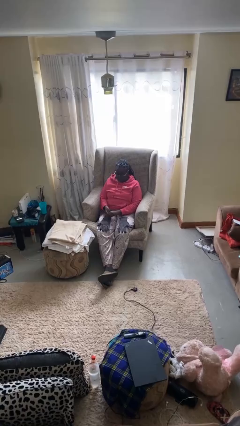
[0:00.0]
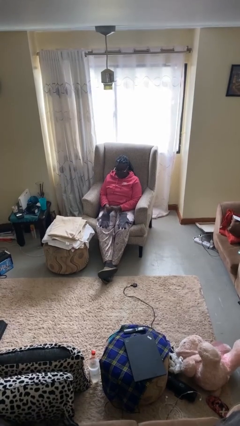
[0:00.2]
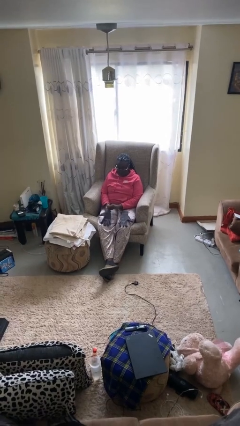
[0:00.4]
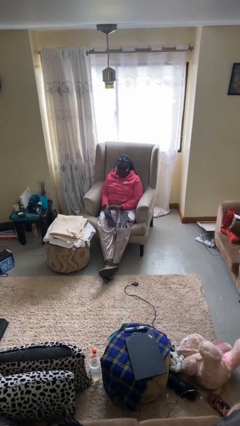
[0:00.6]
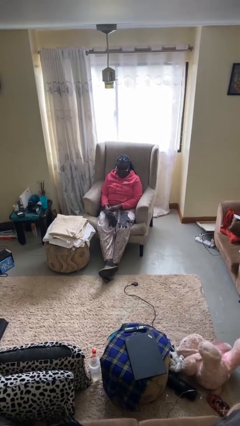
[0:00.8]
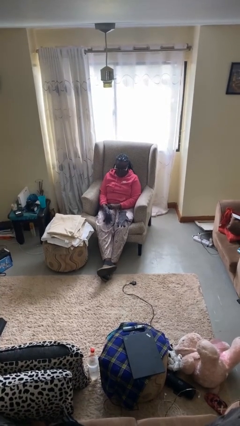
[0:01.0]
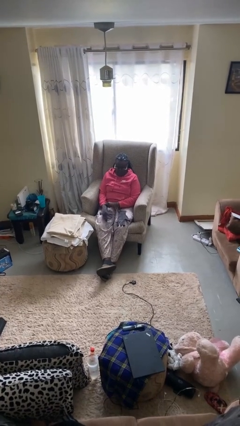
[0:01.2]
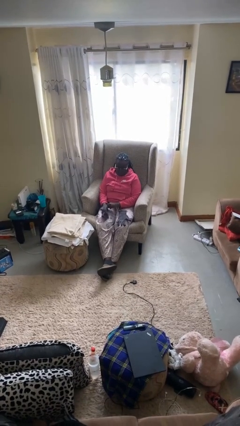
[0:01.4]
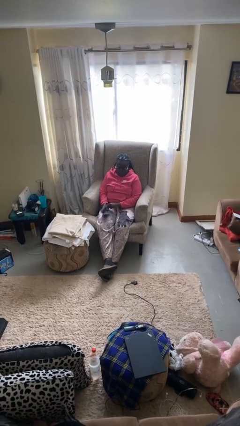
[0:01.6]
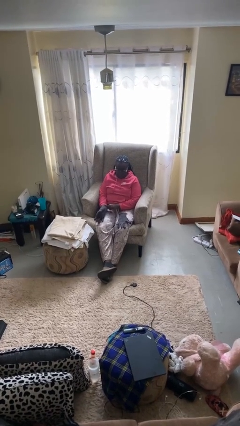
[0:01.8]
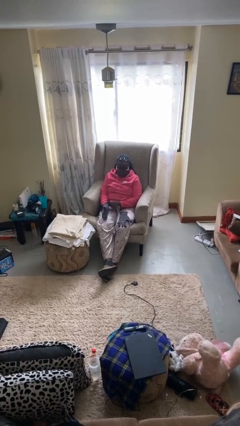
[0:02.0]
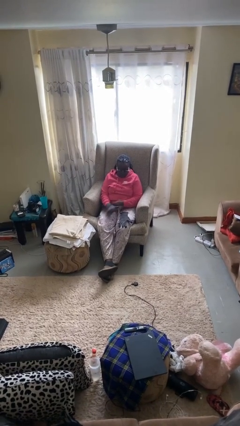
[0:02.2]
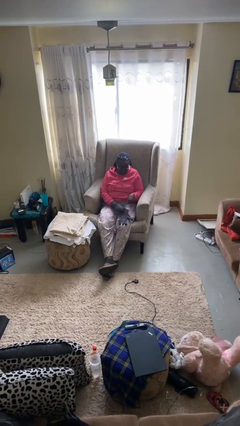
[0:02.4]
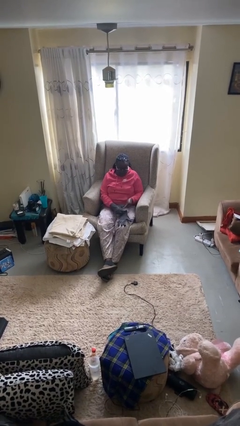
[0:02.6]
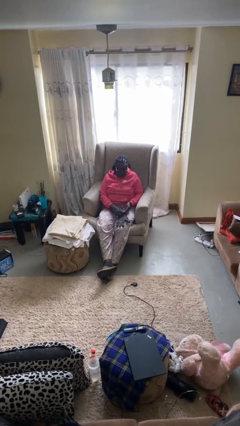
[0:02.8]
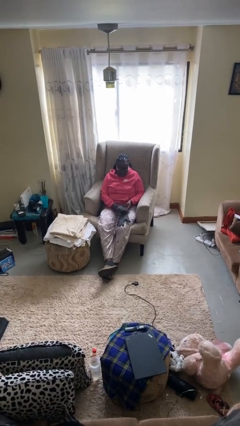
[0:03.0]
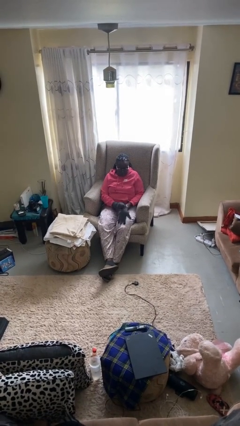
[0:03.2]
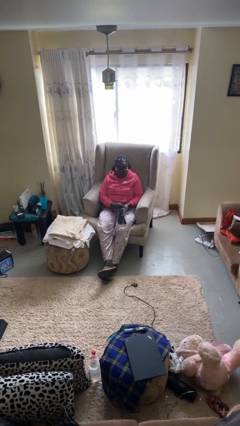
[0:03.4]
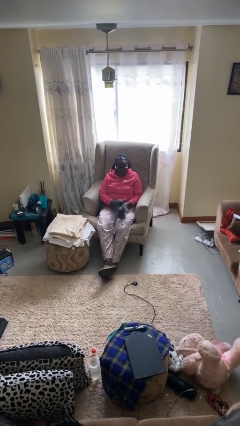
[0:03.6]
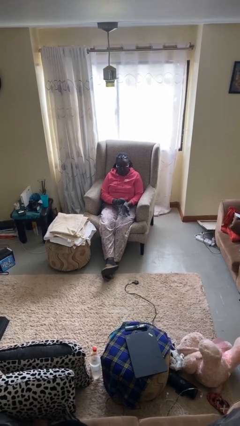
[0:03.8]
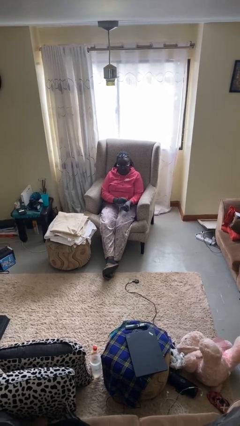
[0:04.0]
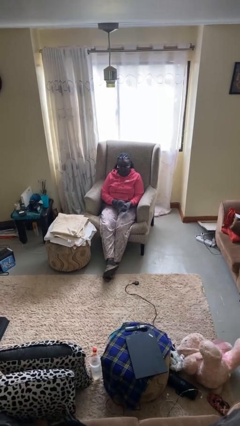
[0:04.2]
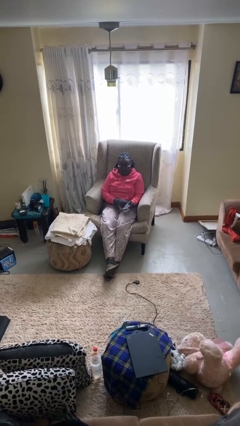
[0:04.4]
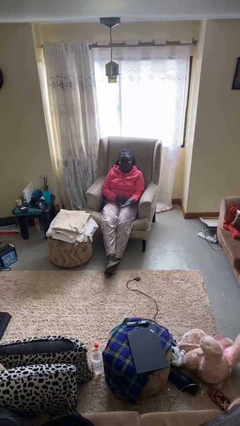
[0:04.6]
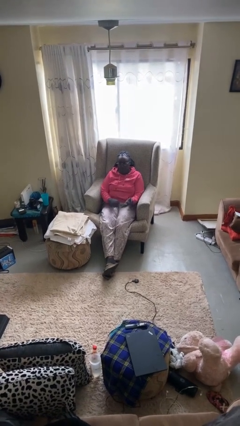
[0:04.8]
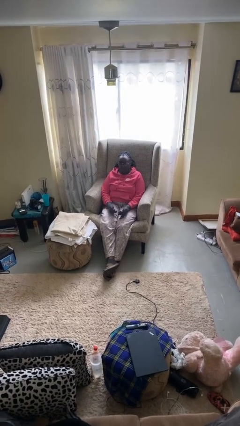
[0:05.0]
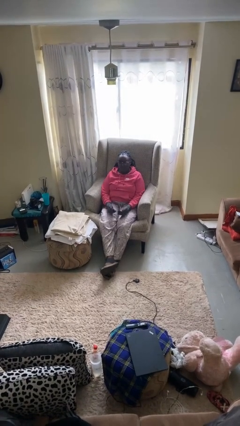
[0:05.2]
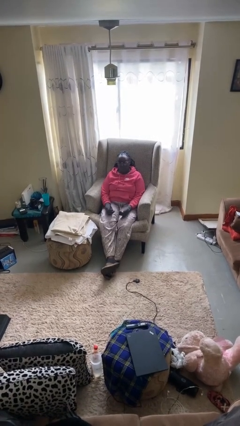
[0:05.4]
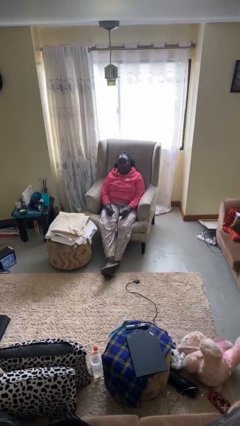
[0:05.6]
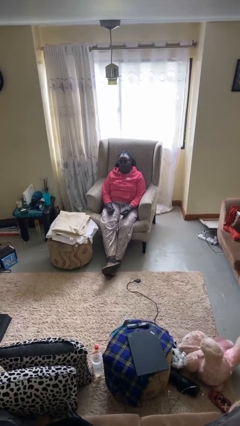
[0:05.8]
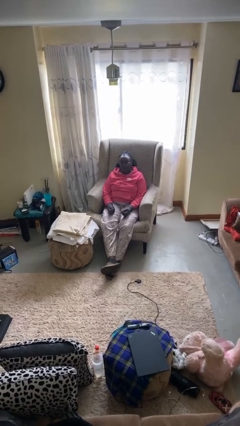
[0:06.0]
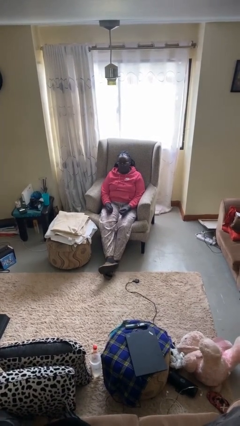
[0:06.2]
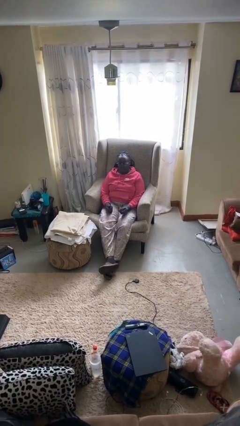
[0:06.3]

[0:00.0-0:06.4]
person puts on gloves

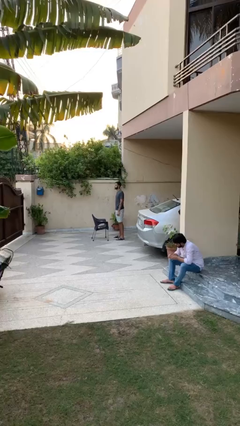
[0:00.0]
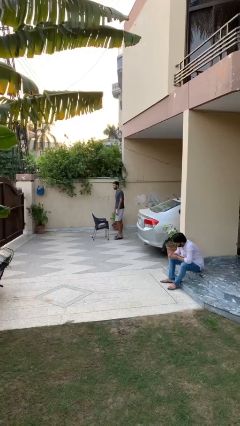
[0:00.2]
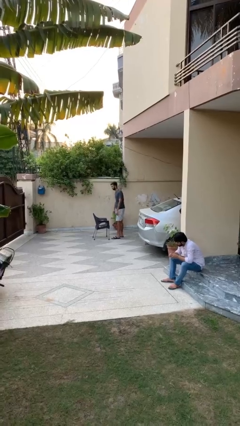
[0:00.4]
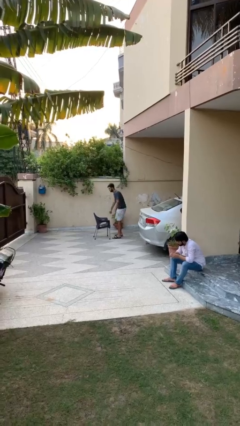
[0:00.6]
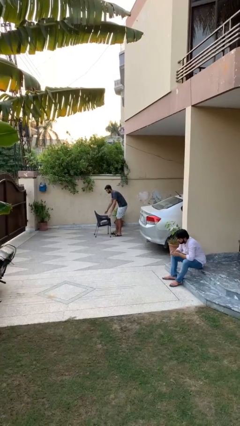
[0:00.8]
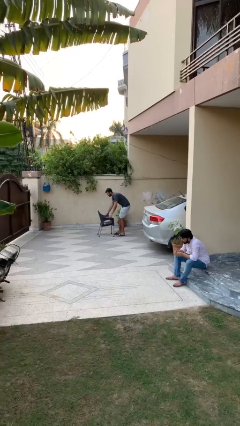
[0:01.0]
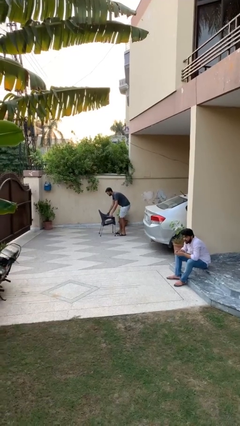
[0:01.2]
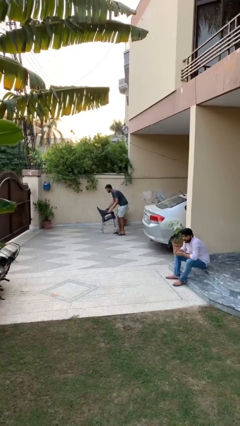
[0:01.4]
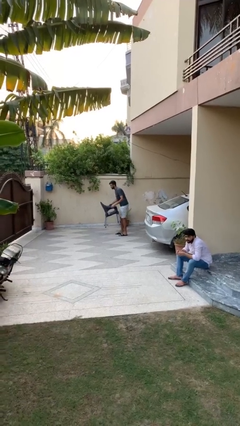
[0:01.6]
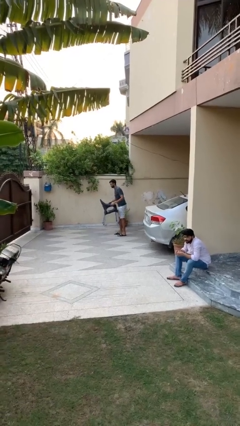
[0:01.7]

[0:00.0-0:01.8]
person picks up object from floor

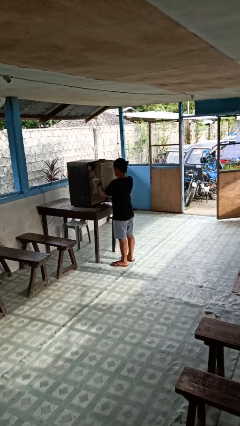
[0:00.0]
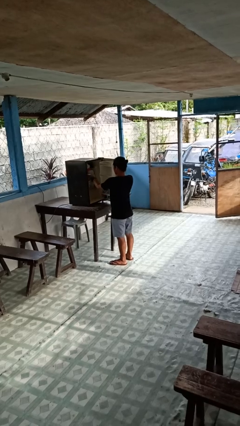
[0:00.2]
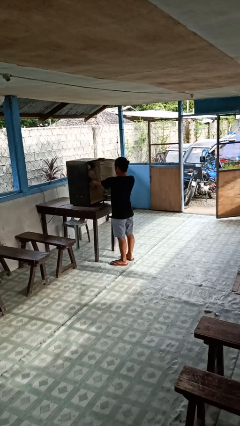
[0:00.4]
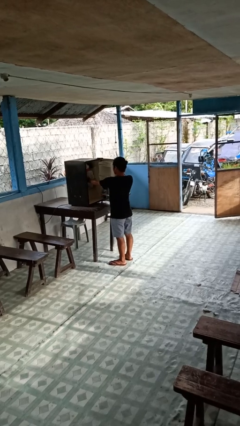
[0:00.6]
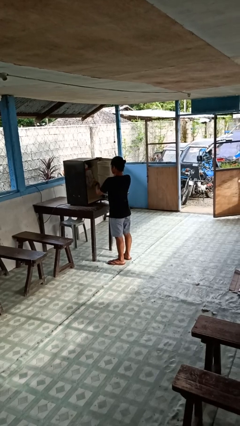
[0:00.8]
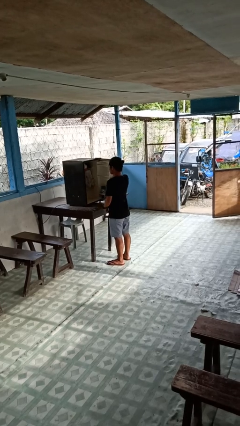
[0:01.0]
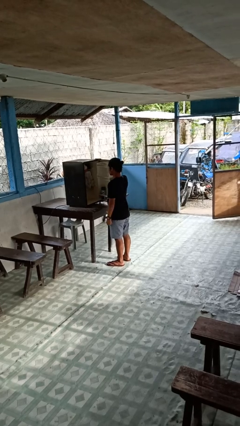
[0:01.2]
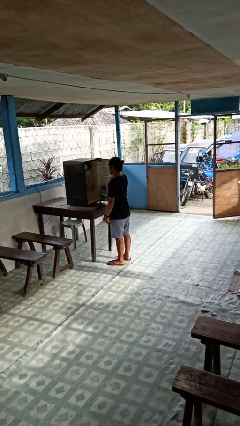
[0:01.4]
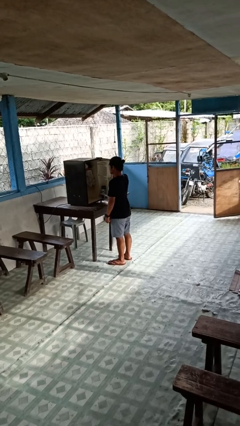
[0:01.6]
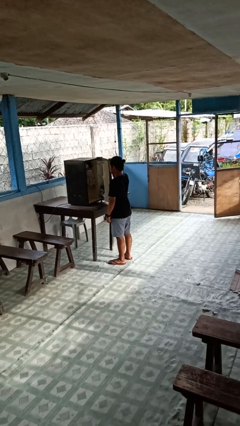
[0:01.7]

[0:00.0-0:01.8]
person puts object into refrigerator

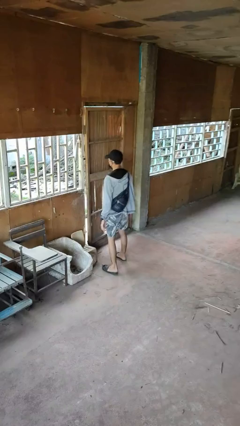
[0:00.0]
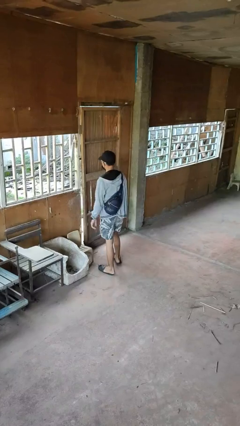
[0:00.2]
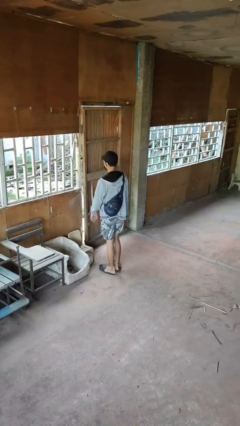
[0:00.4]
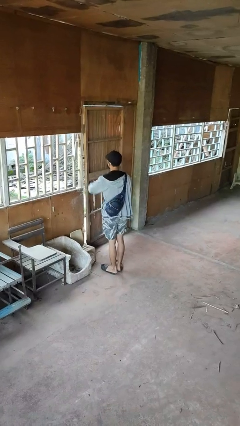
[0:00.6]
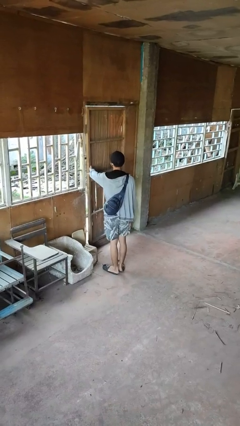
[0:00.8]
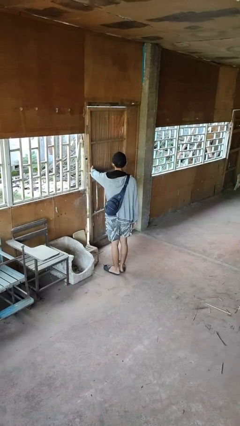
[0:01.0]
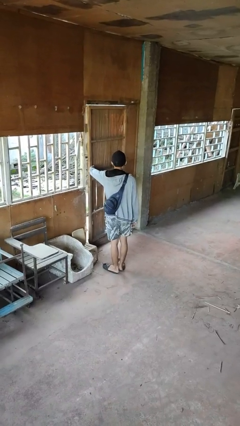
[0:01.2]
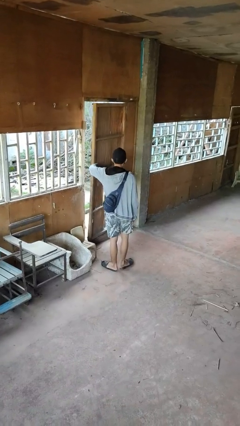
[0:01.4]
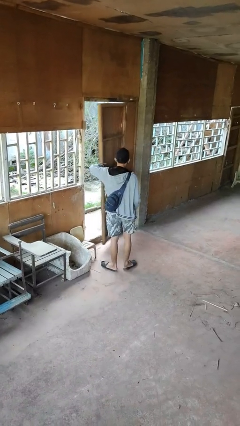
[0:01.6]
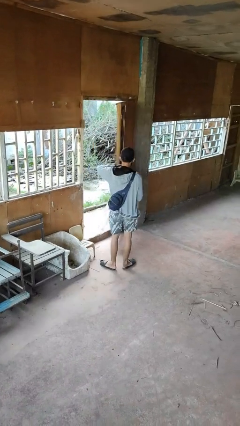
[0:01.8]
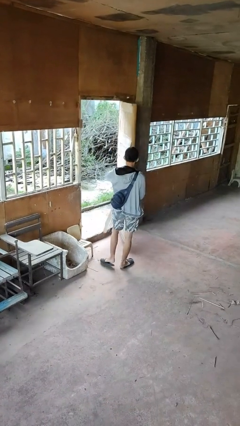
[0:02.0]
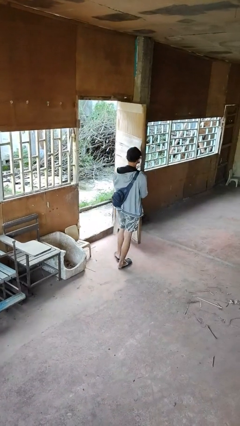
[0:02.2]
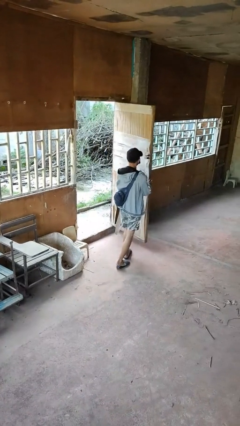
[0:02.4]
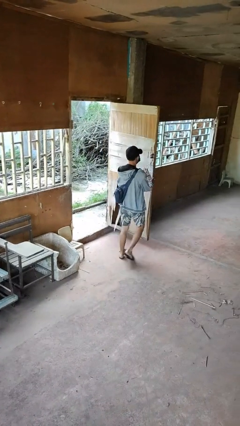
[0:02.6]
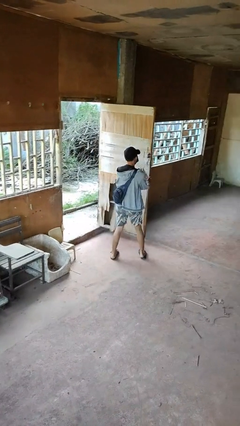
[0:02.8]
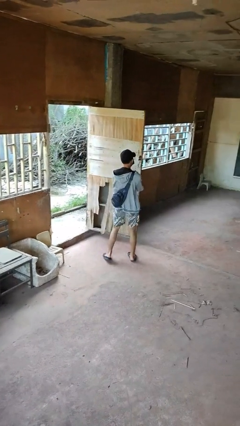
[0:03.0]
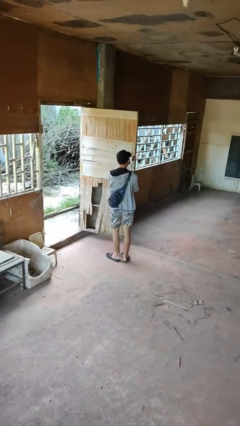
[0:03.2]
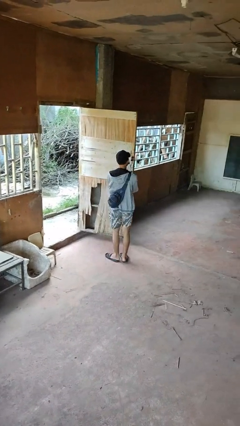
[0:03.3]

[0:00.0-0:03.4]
person opens facility door

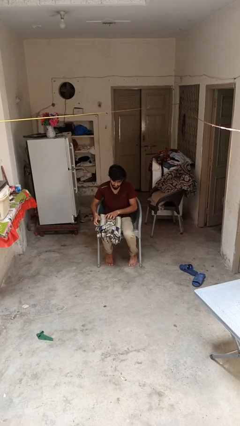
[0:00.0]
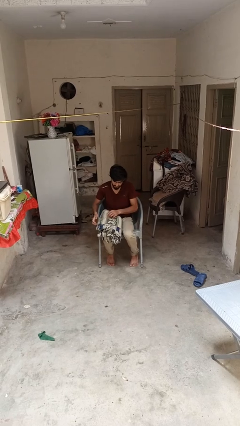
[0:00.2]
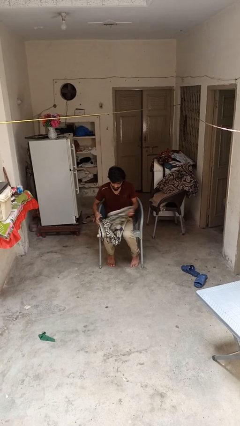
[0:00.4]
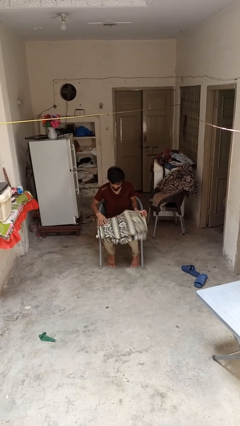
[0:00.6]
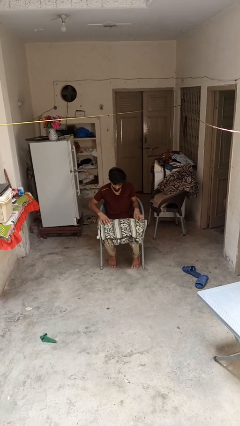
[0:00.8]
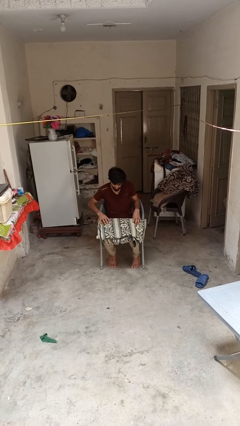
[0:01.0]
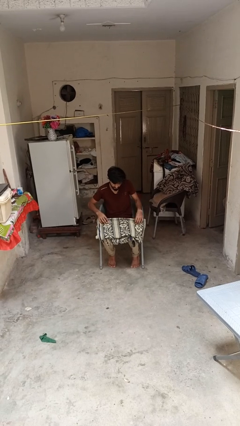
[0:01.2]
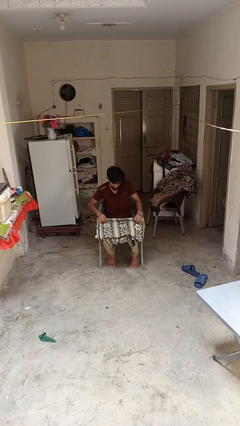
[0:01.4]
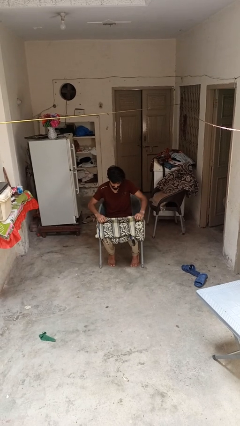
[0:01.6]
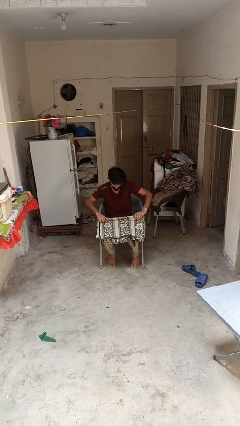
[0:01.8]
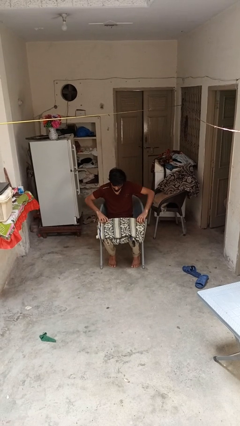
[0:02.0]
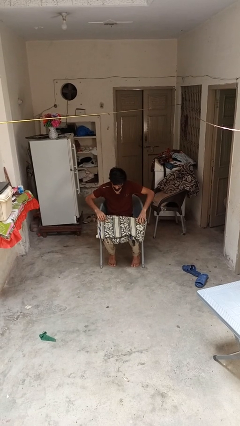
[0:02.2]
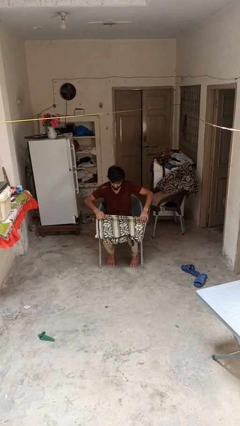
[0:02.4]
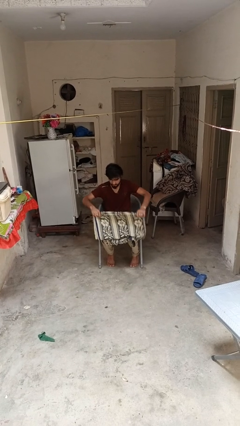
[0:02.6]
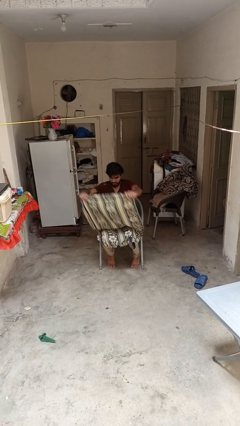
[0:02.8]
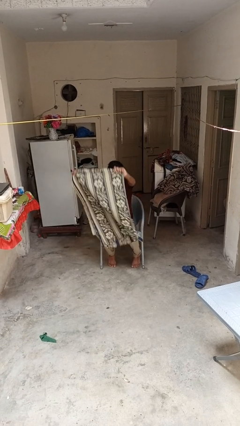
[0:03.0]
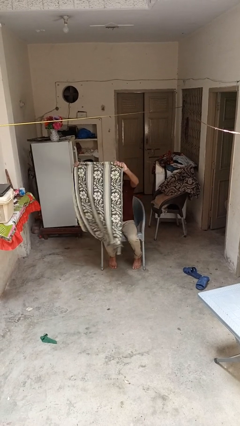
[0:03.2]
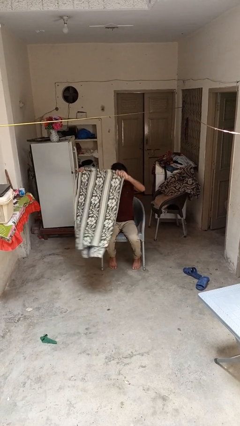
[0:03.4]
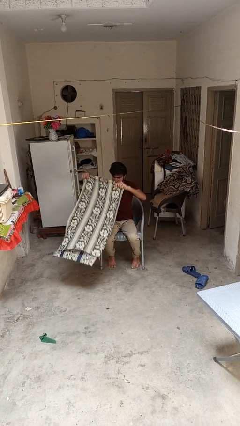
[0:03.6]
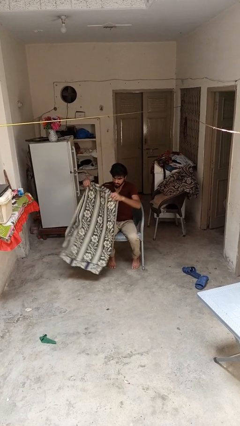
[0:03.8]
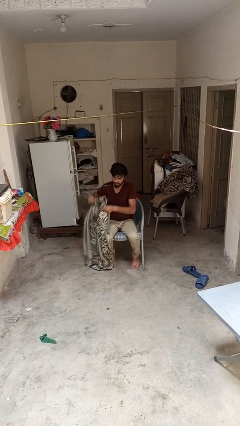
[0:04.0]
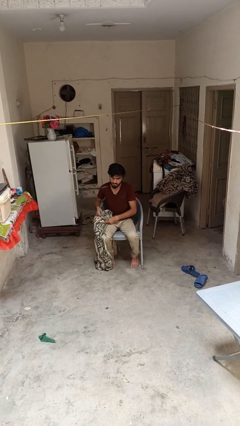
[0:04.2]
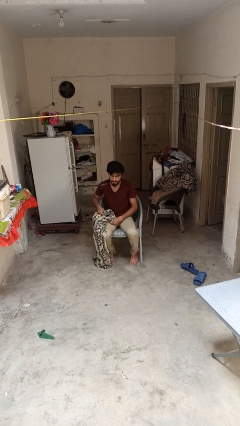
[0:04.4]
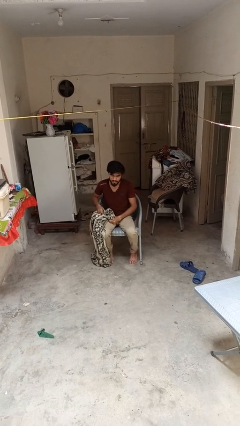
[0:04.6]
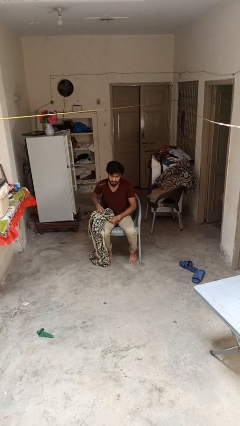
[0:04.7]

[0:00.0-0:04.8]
person unfolds blanket
